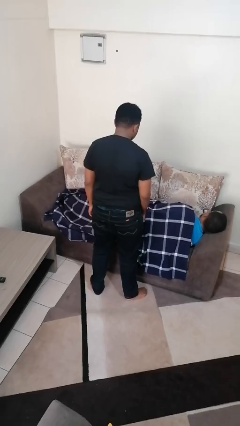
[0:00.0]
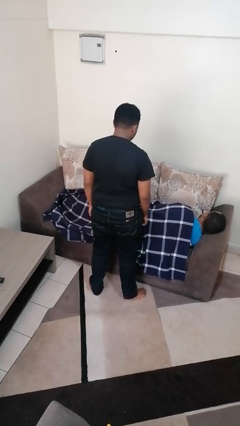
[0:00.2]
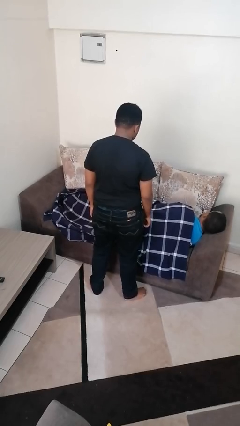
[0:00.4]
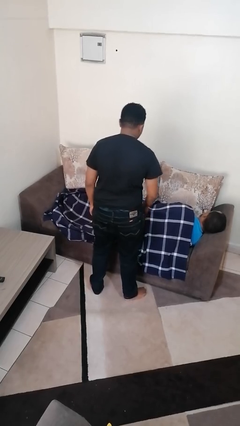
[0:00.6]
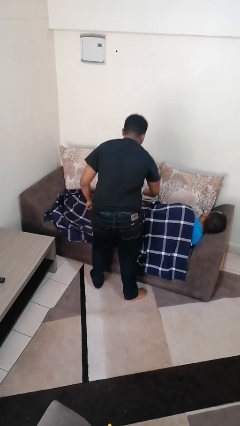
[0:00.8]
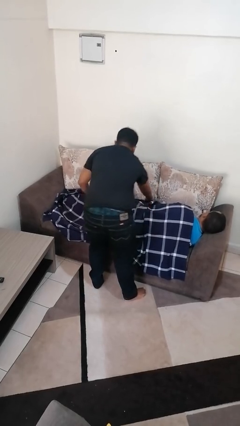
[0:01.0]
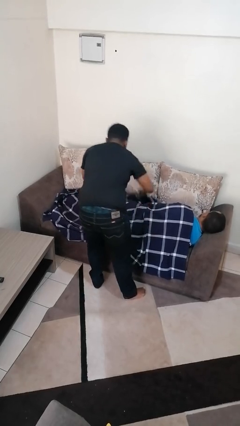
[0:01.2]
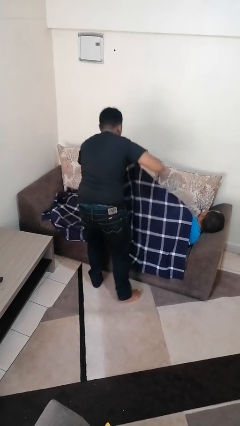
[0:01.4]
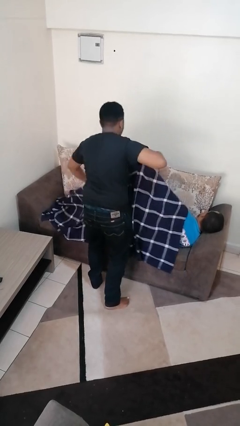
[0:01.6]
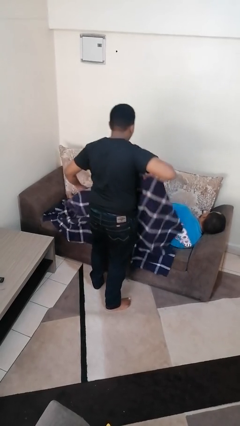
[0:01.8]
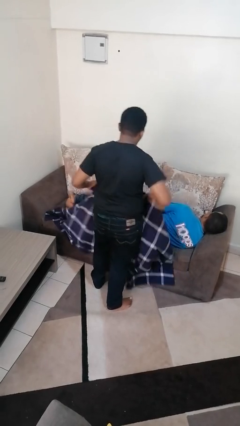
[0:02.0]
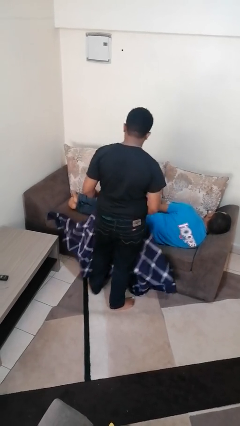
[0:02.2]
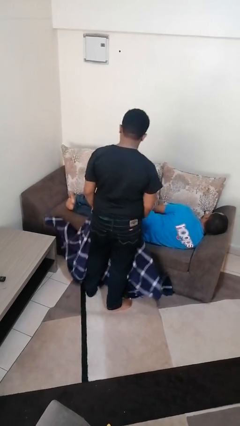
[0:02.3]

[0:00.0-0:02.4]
person uncovers friend with blanket

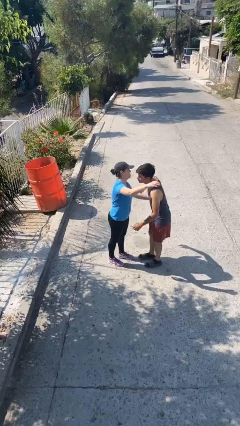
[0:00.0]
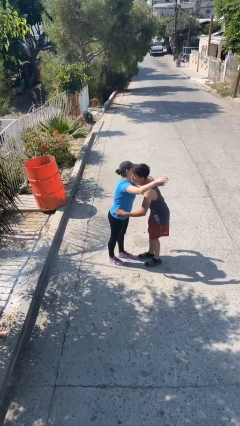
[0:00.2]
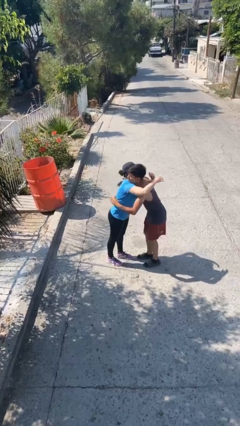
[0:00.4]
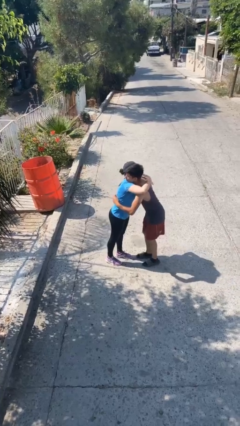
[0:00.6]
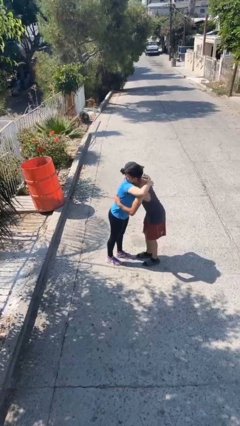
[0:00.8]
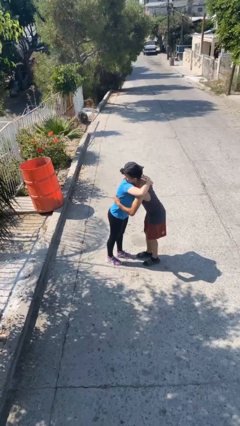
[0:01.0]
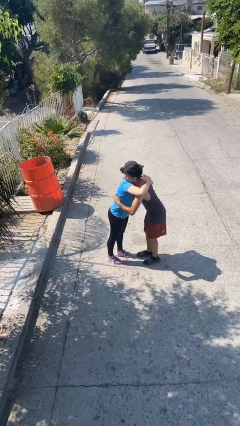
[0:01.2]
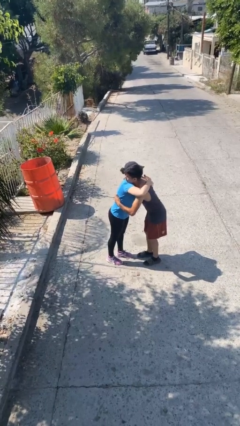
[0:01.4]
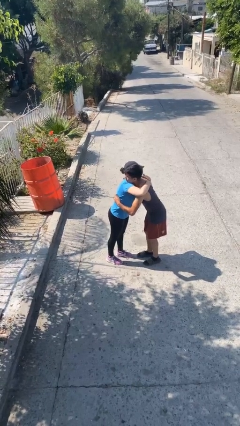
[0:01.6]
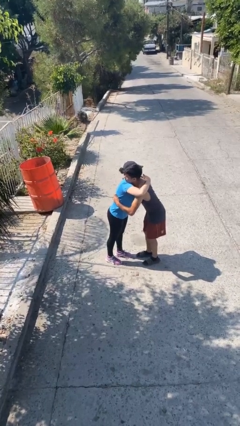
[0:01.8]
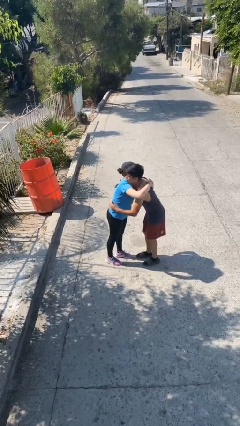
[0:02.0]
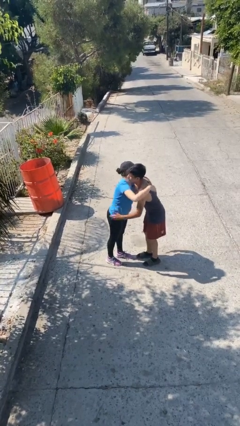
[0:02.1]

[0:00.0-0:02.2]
person embraces person

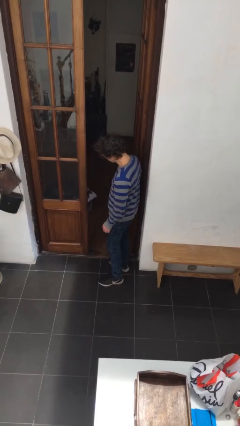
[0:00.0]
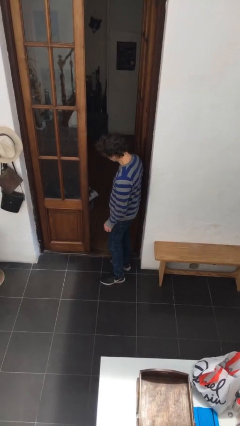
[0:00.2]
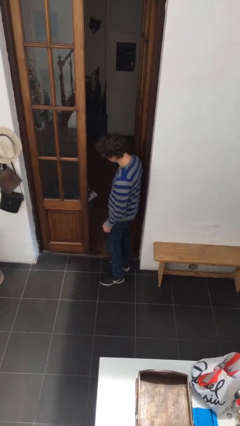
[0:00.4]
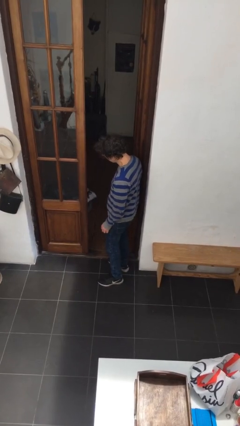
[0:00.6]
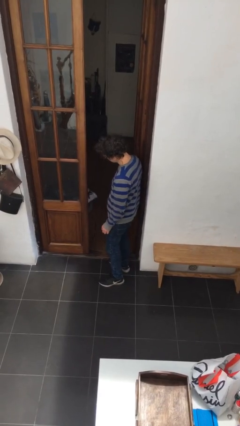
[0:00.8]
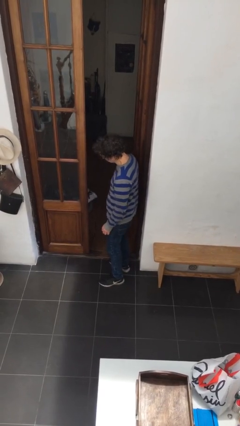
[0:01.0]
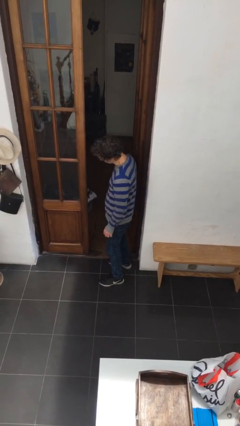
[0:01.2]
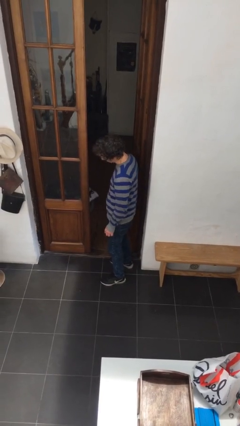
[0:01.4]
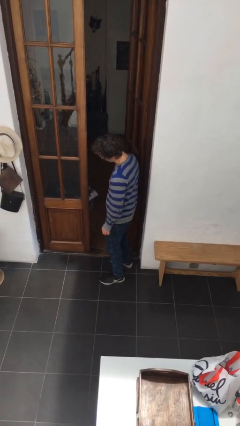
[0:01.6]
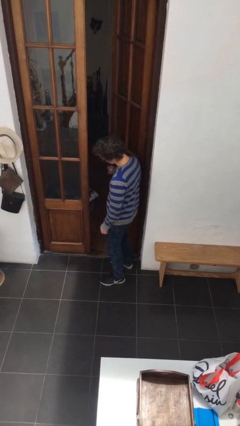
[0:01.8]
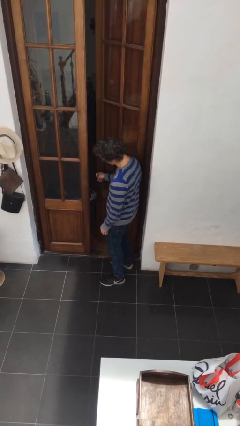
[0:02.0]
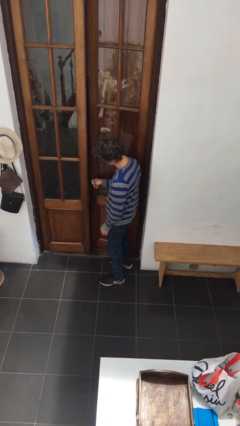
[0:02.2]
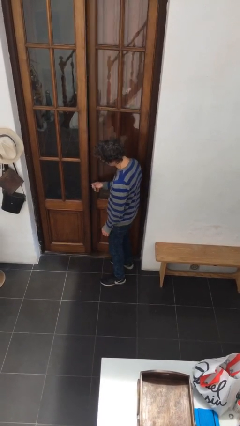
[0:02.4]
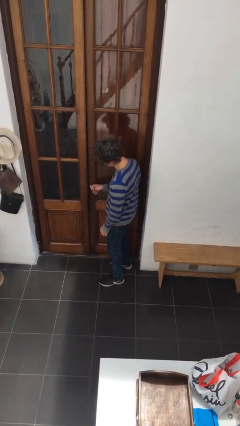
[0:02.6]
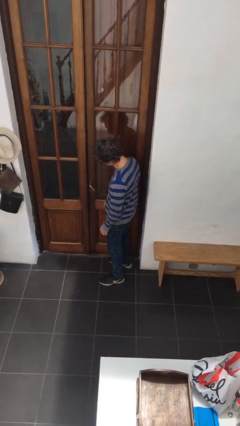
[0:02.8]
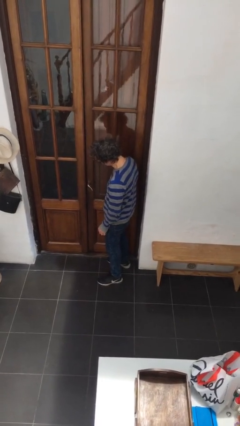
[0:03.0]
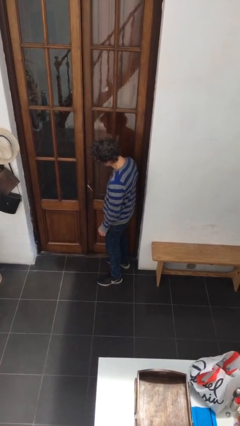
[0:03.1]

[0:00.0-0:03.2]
person closes facility door

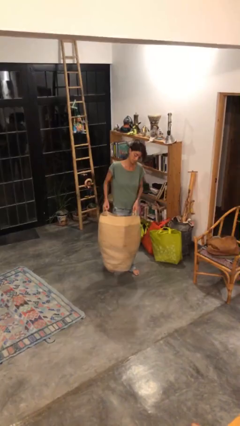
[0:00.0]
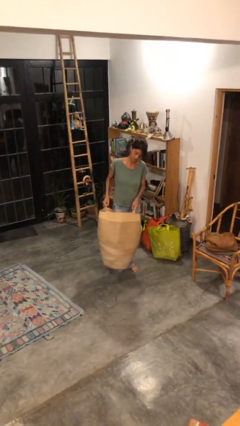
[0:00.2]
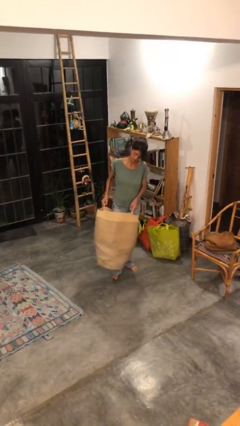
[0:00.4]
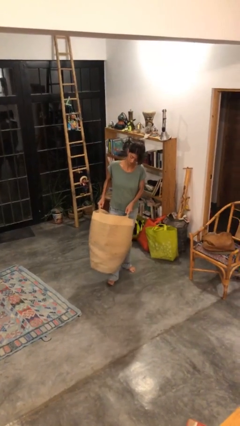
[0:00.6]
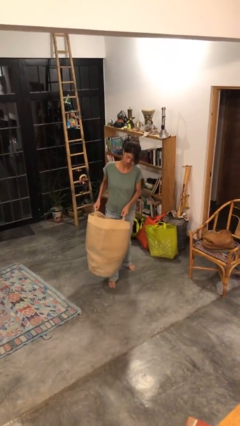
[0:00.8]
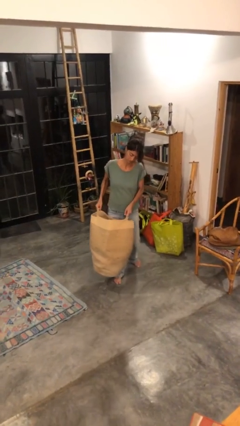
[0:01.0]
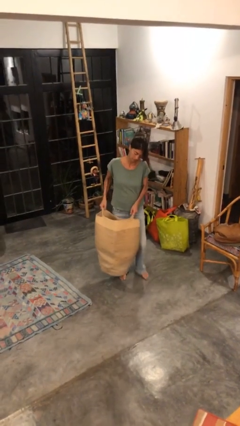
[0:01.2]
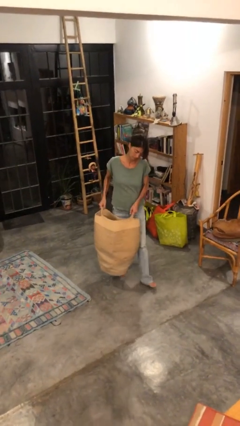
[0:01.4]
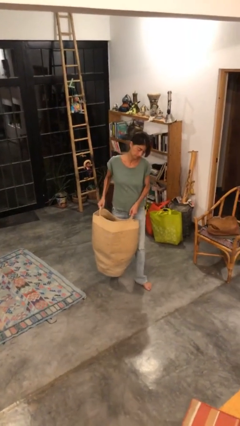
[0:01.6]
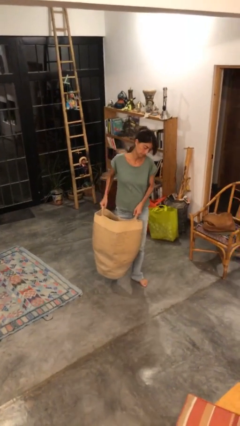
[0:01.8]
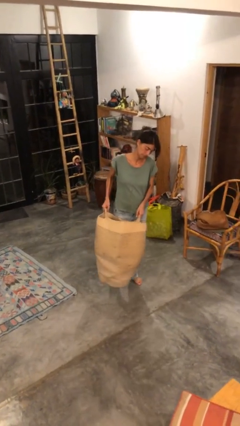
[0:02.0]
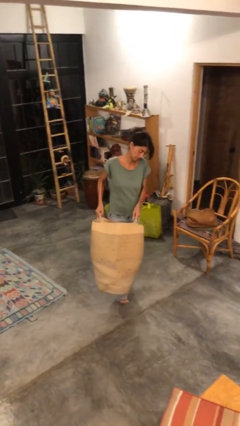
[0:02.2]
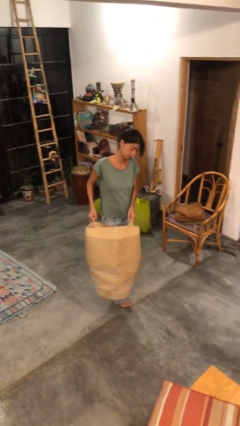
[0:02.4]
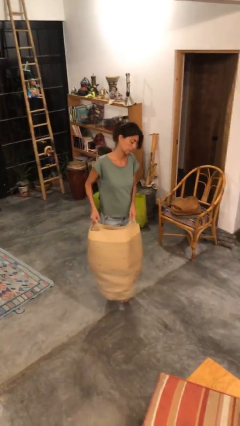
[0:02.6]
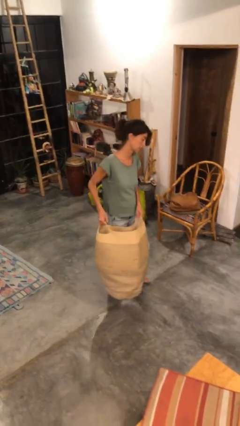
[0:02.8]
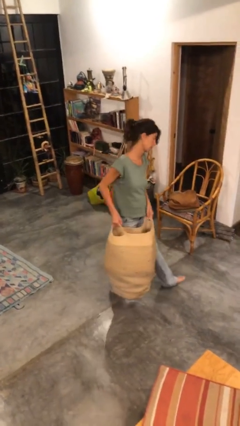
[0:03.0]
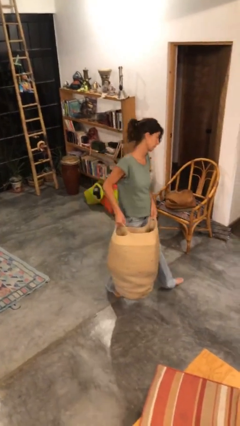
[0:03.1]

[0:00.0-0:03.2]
person carries laundry basket

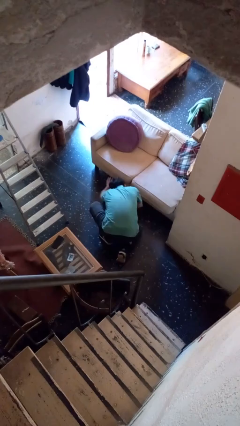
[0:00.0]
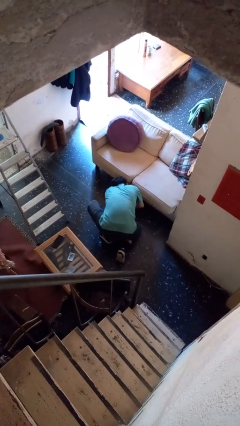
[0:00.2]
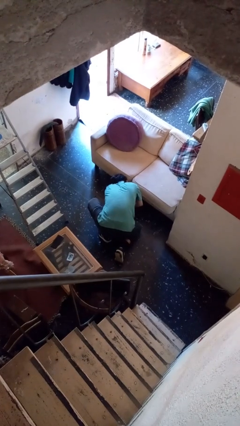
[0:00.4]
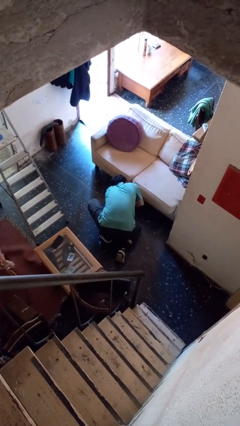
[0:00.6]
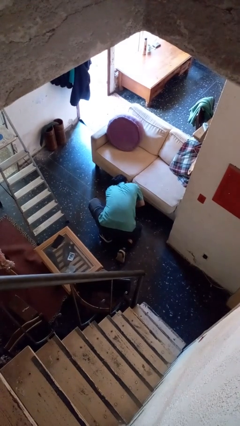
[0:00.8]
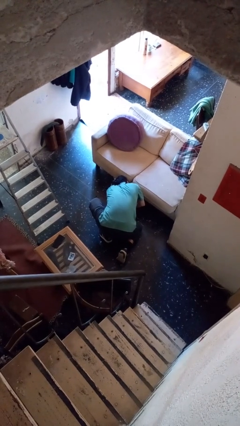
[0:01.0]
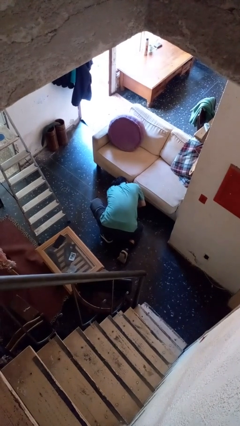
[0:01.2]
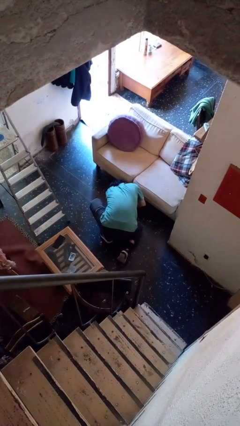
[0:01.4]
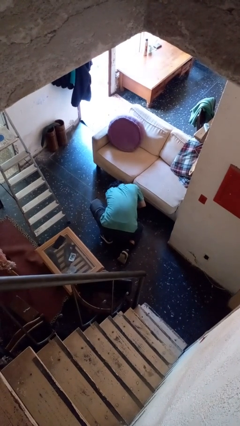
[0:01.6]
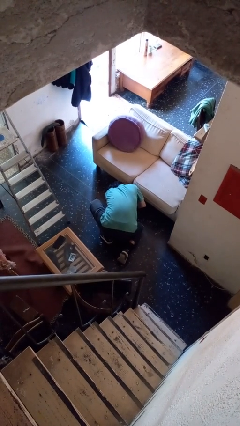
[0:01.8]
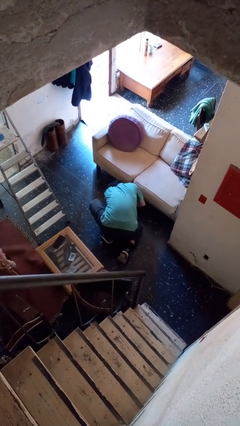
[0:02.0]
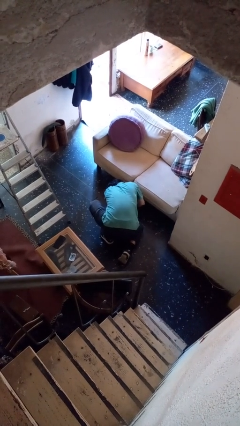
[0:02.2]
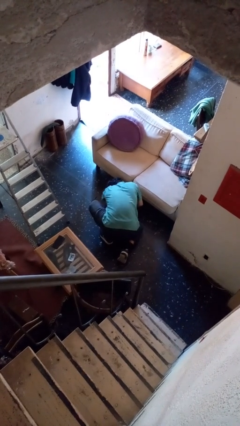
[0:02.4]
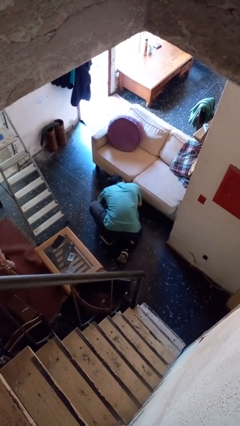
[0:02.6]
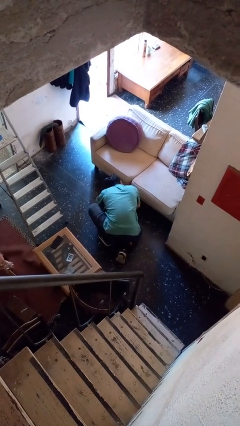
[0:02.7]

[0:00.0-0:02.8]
person searches under couch

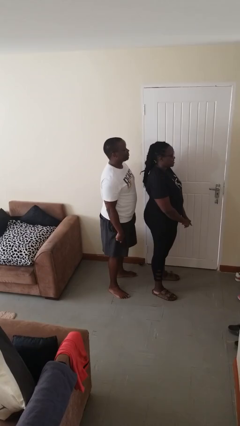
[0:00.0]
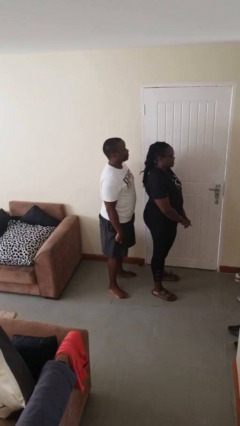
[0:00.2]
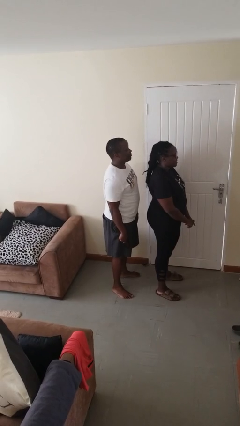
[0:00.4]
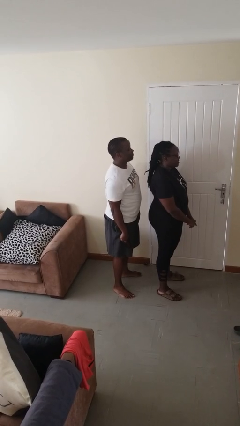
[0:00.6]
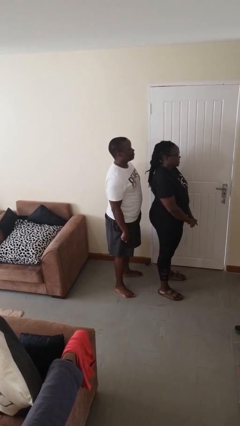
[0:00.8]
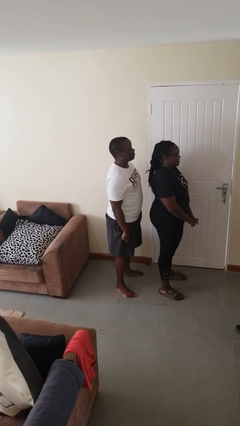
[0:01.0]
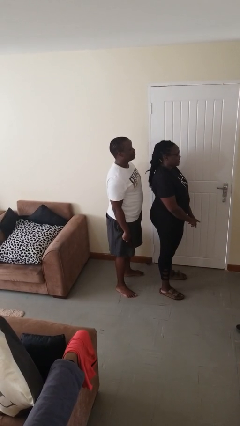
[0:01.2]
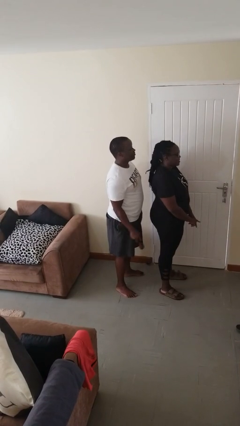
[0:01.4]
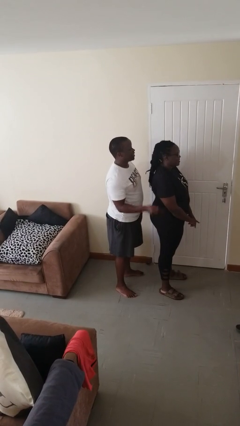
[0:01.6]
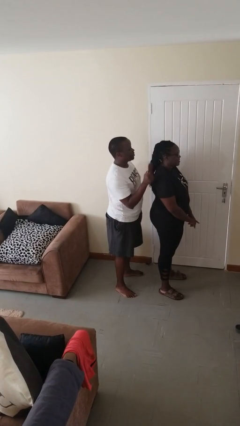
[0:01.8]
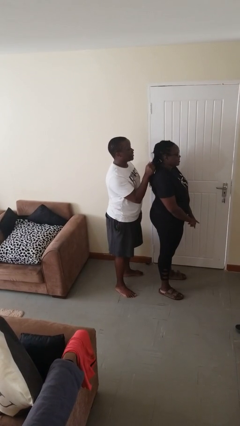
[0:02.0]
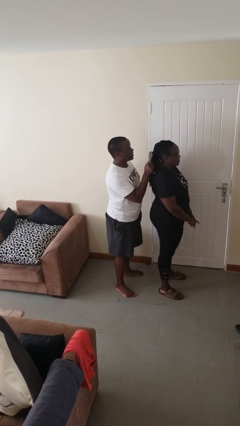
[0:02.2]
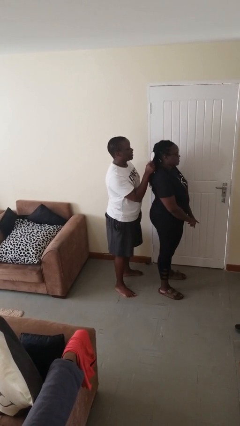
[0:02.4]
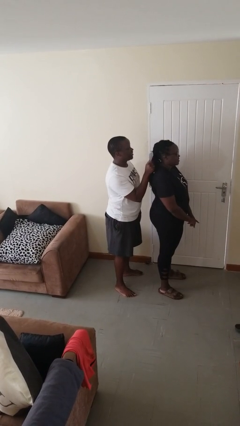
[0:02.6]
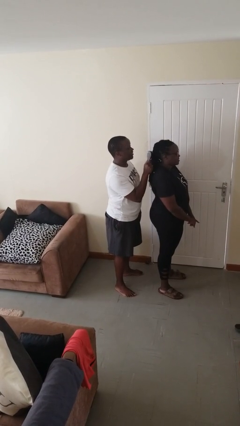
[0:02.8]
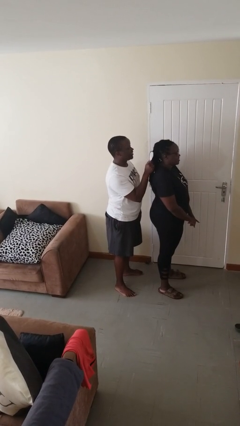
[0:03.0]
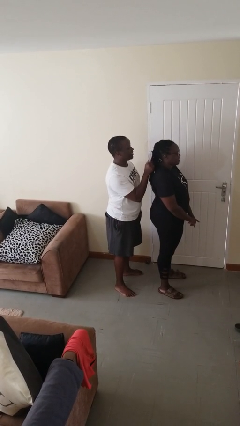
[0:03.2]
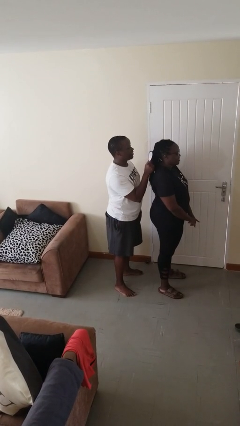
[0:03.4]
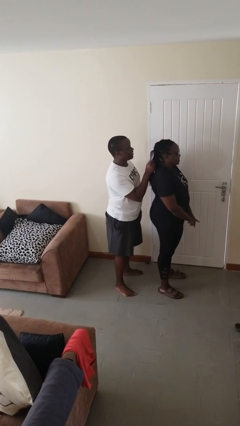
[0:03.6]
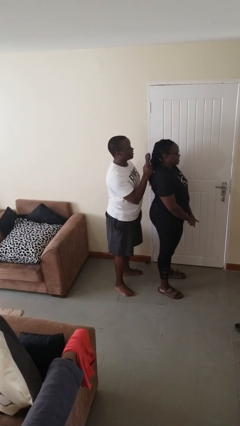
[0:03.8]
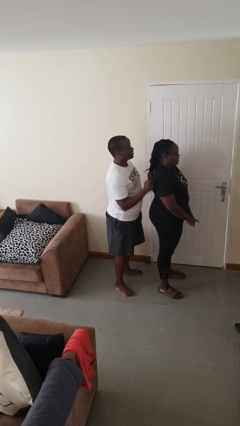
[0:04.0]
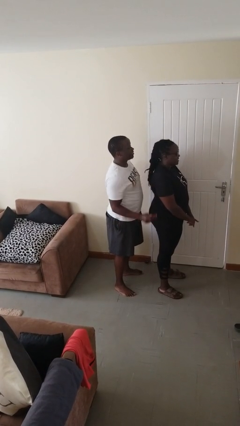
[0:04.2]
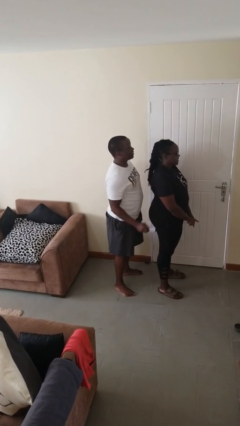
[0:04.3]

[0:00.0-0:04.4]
person brushes hair of person
